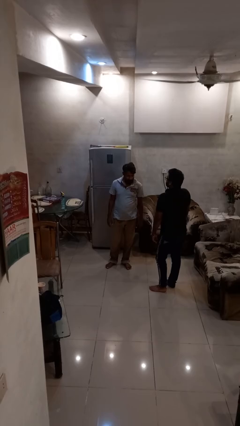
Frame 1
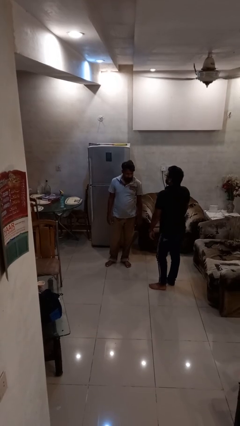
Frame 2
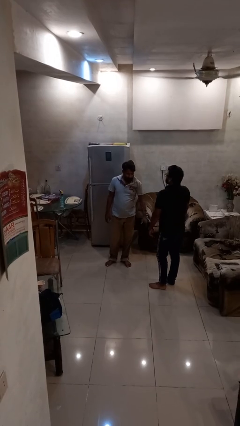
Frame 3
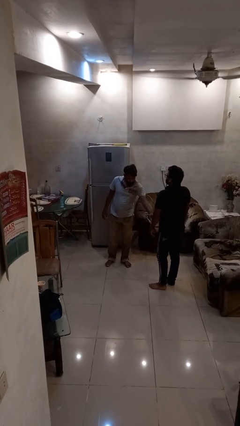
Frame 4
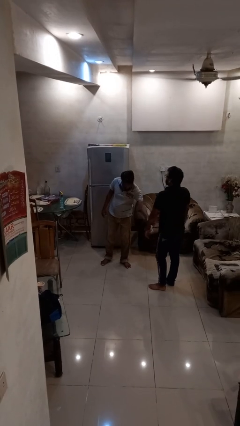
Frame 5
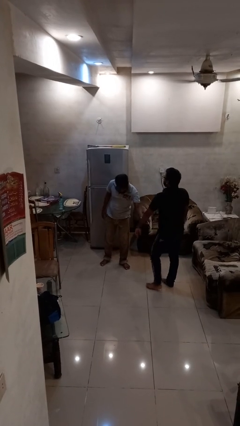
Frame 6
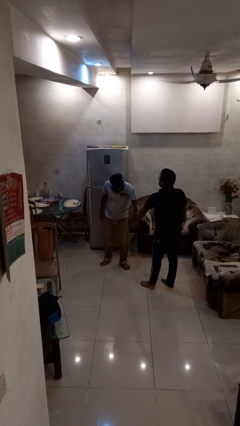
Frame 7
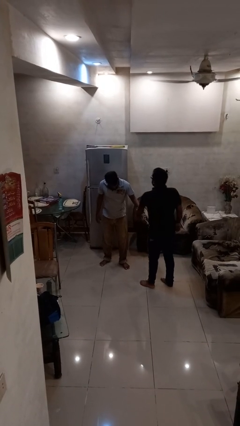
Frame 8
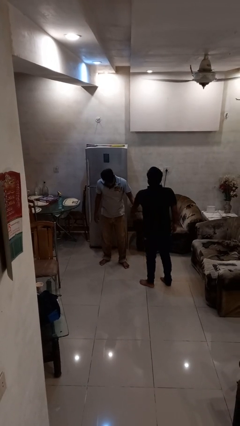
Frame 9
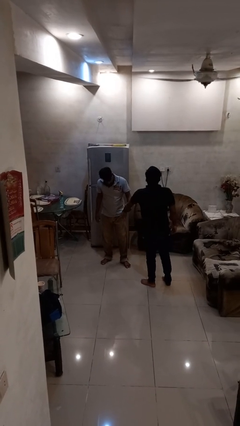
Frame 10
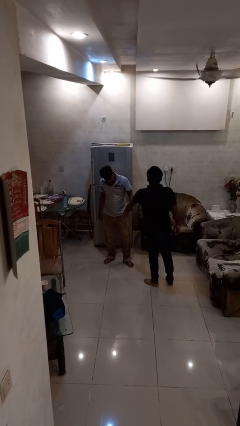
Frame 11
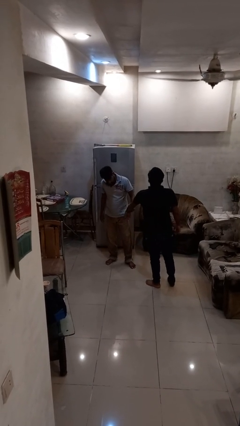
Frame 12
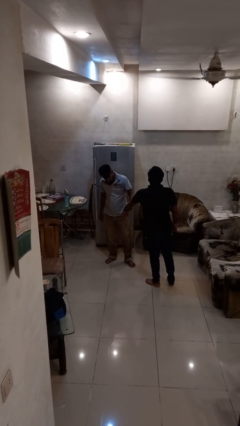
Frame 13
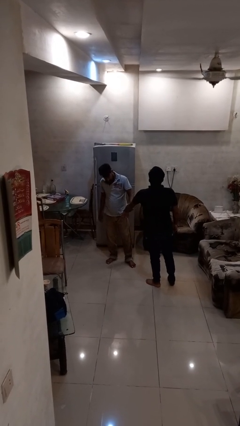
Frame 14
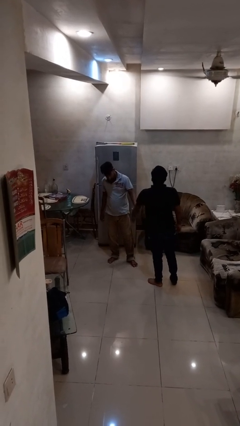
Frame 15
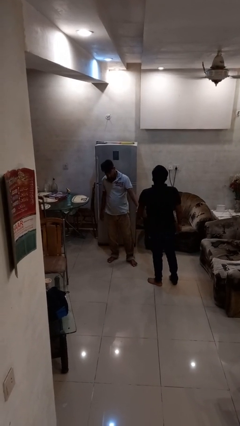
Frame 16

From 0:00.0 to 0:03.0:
person grabs person by forearm

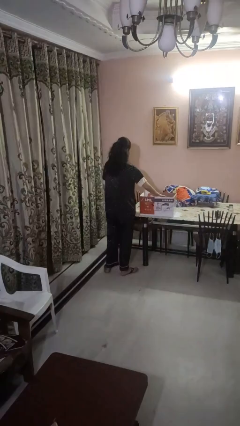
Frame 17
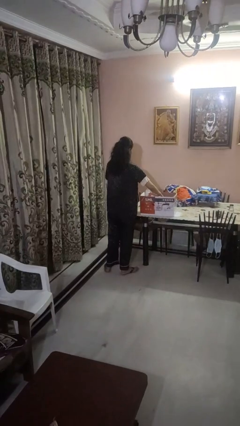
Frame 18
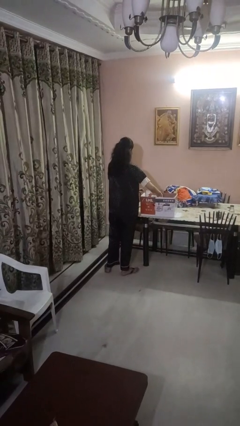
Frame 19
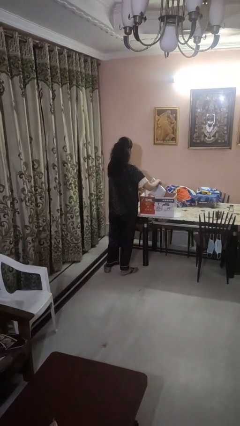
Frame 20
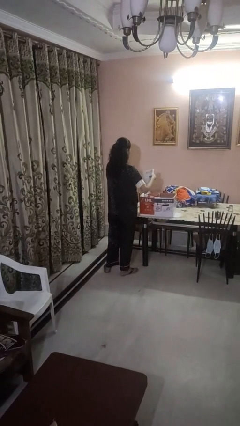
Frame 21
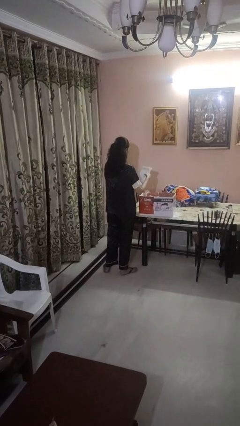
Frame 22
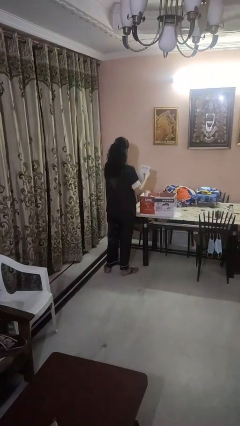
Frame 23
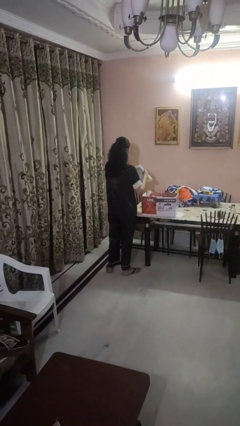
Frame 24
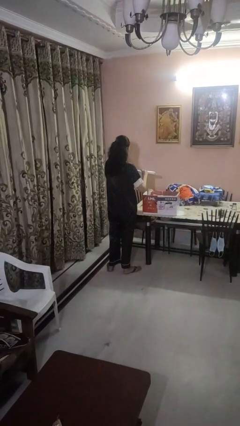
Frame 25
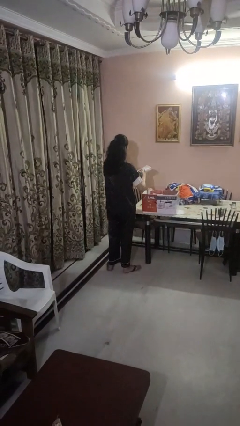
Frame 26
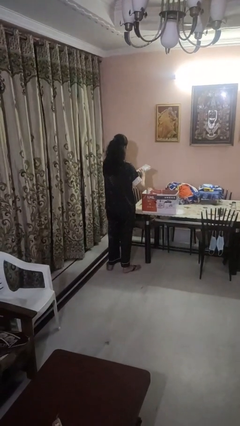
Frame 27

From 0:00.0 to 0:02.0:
person takes object from box

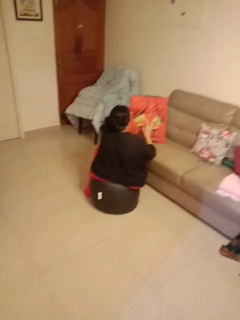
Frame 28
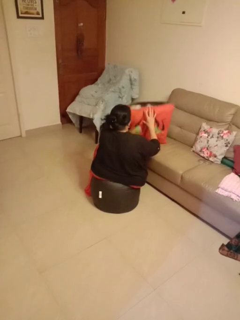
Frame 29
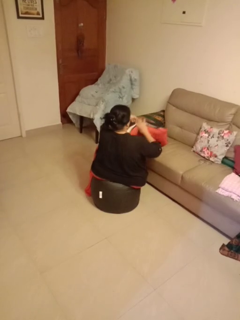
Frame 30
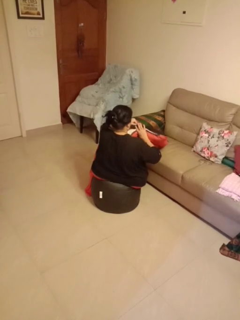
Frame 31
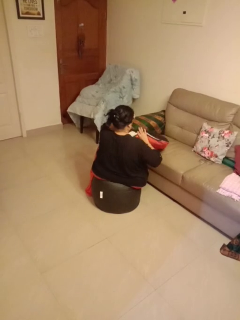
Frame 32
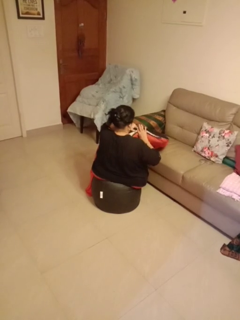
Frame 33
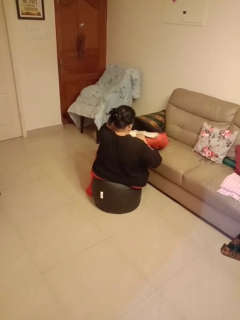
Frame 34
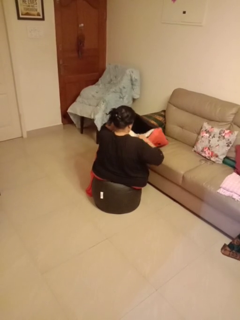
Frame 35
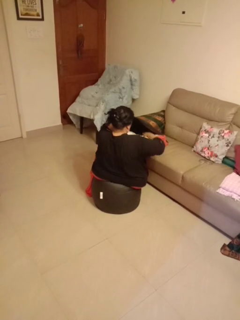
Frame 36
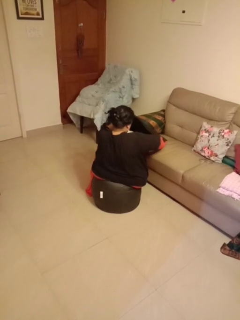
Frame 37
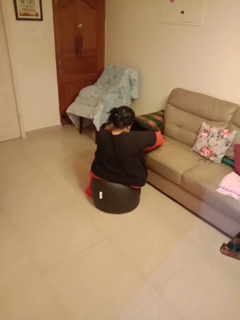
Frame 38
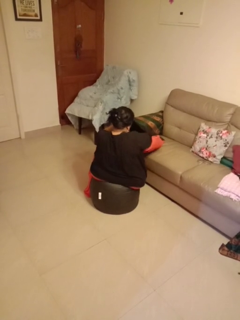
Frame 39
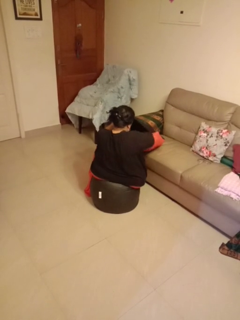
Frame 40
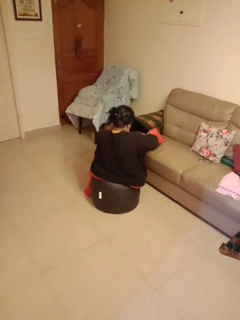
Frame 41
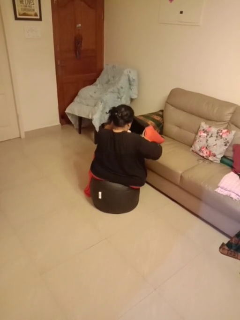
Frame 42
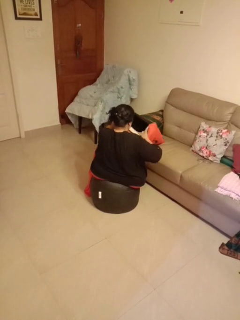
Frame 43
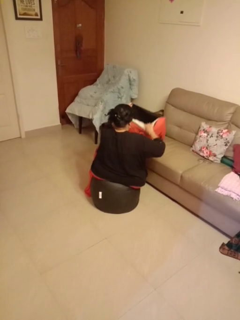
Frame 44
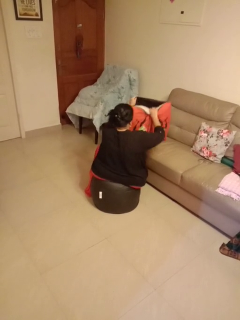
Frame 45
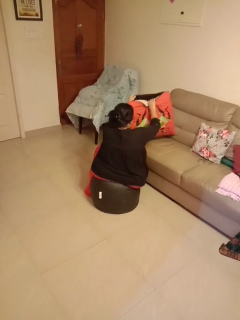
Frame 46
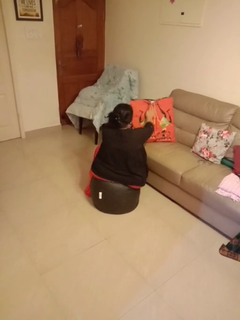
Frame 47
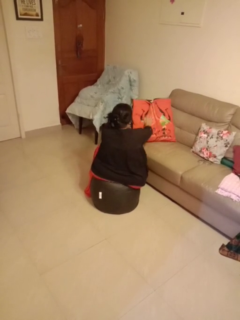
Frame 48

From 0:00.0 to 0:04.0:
person searches in couch

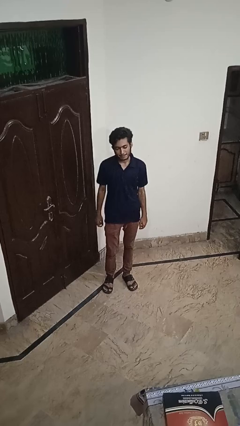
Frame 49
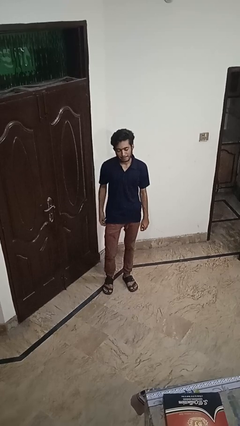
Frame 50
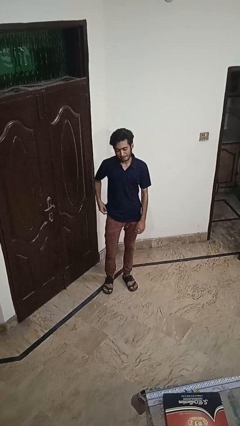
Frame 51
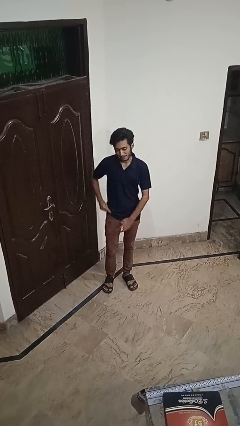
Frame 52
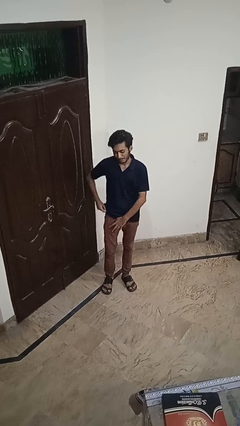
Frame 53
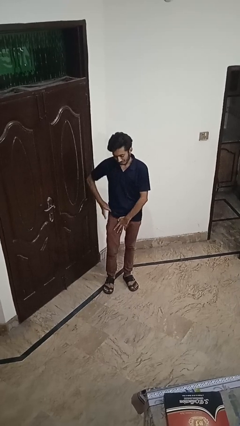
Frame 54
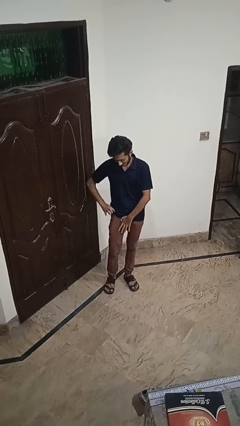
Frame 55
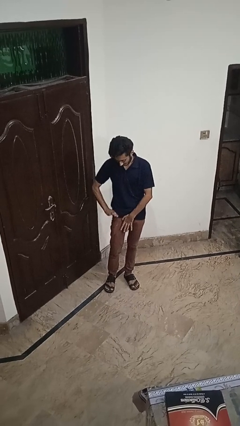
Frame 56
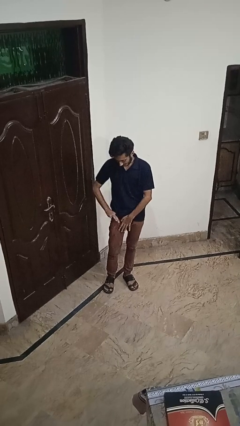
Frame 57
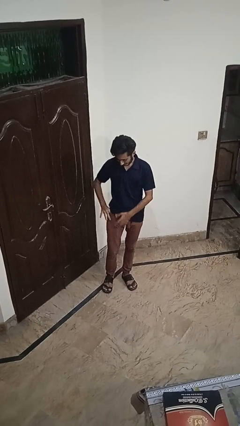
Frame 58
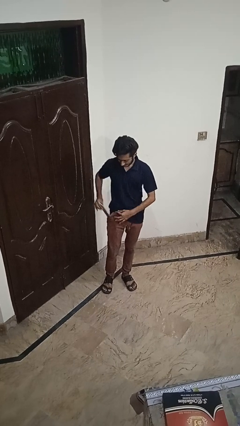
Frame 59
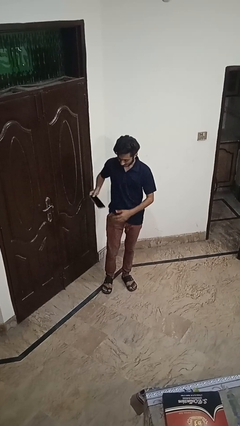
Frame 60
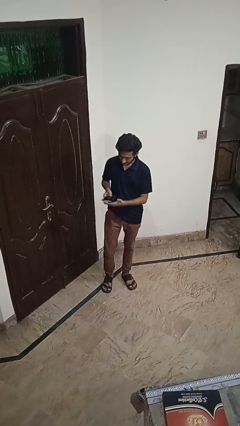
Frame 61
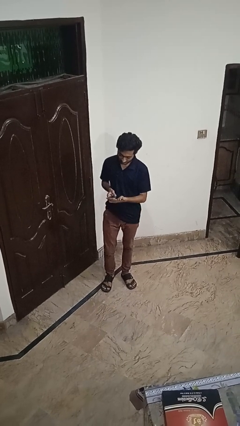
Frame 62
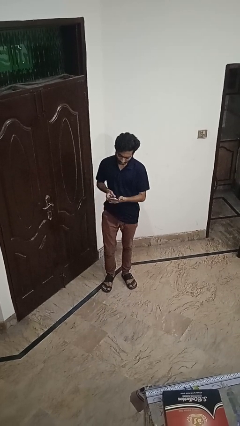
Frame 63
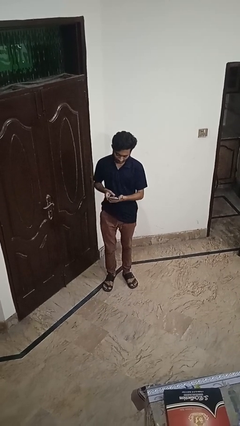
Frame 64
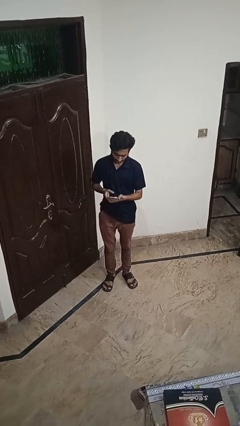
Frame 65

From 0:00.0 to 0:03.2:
person takes phone from pocket

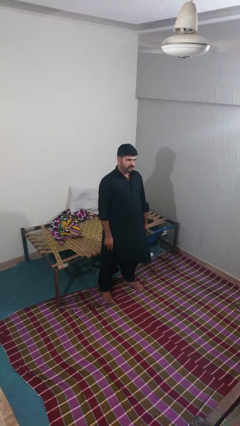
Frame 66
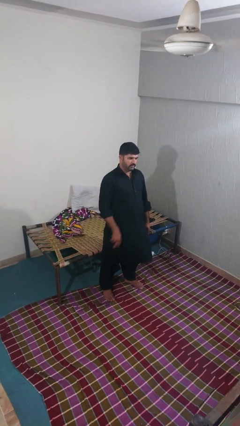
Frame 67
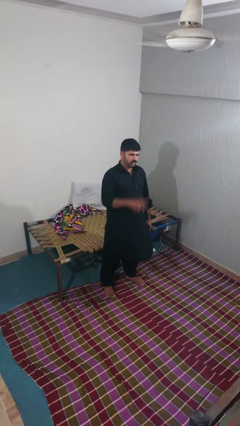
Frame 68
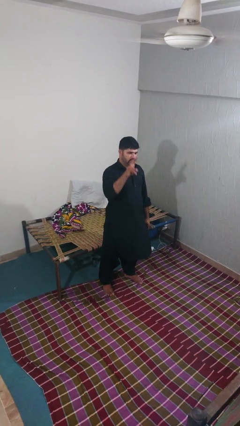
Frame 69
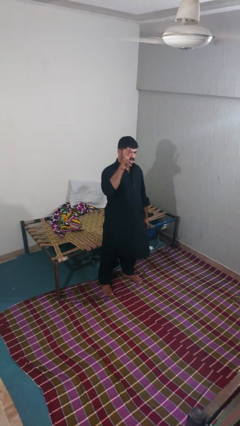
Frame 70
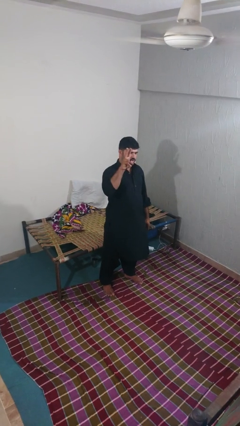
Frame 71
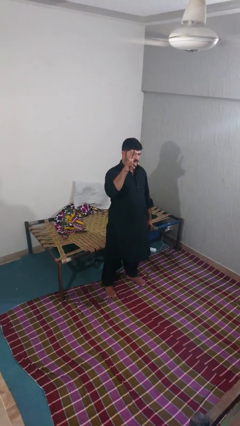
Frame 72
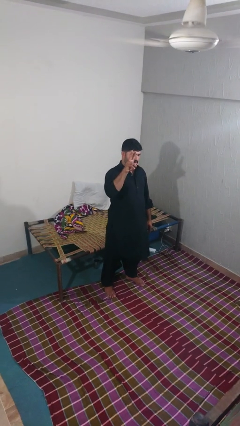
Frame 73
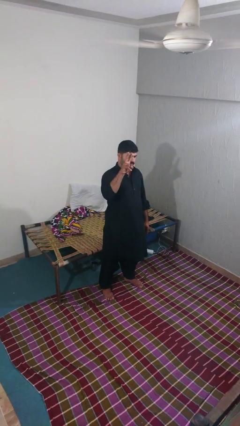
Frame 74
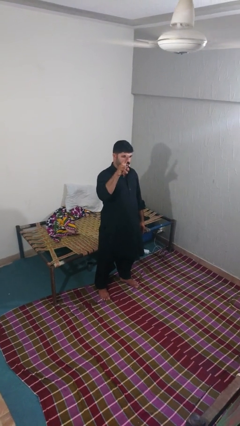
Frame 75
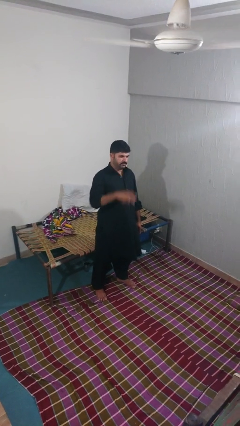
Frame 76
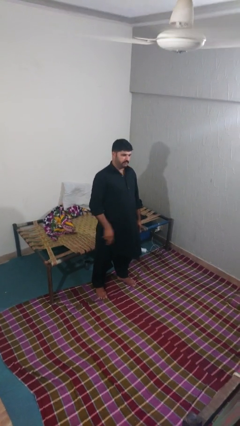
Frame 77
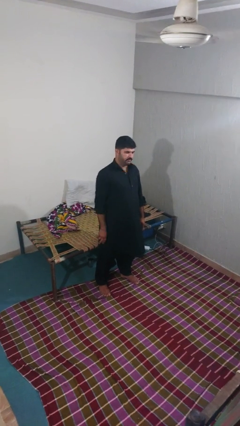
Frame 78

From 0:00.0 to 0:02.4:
person gestures peace

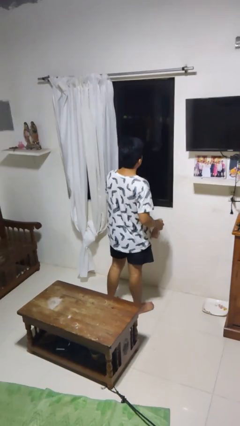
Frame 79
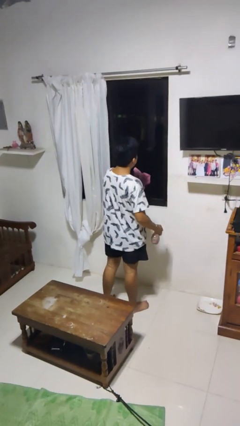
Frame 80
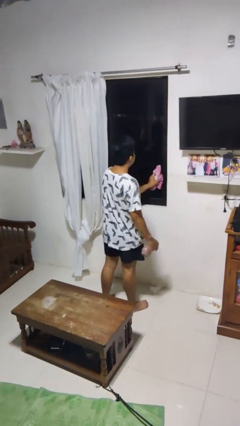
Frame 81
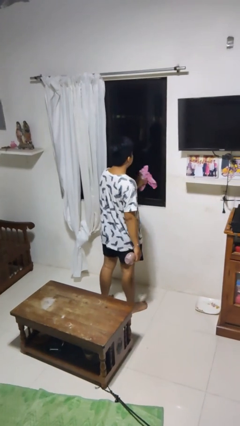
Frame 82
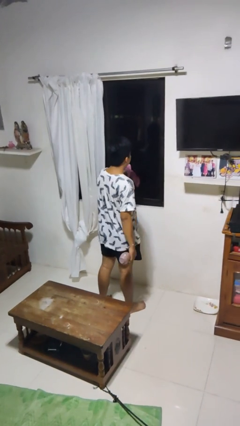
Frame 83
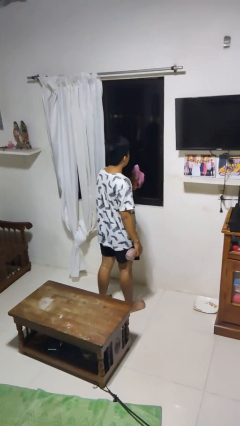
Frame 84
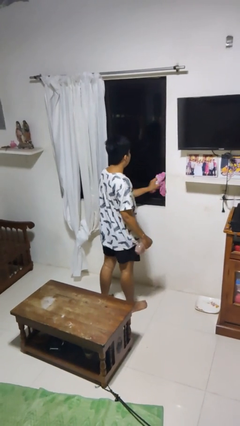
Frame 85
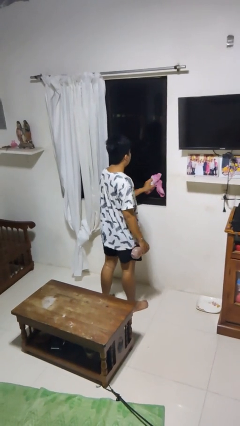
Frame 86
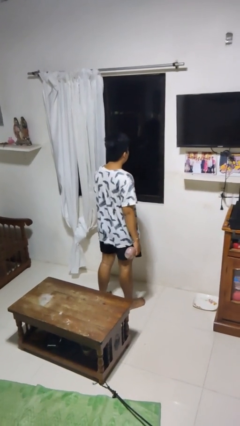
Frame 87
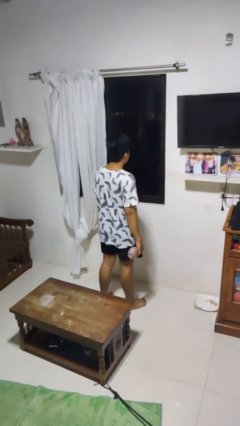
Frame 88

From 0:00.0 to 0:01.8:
person washes window

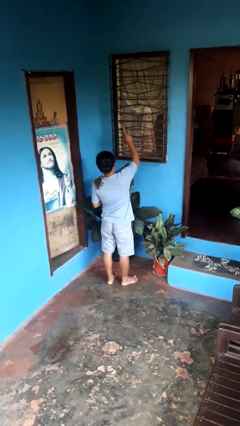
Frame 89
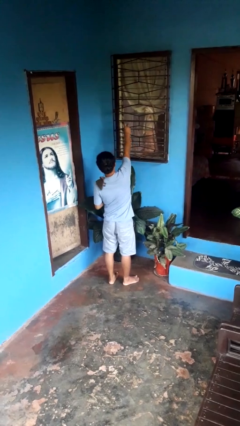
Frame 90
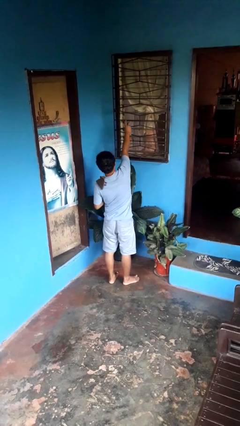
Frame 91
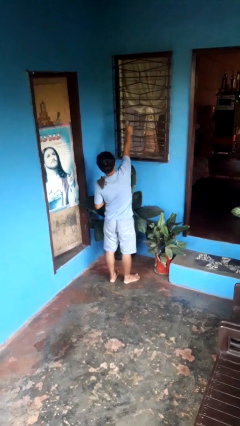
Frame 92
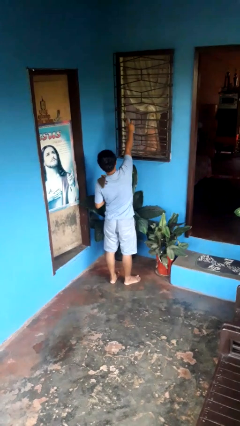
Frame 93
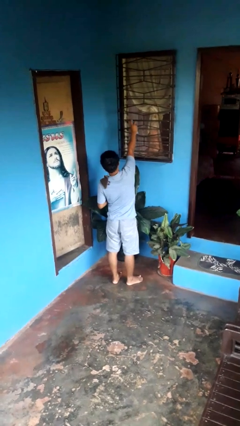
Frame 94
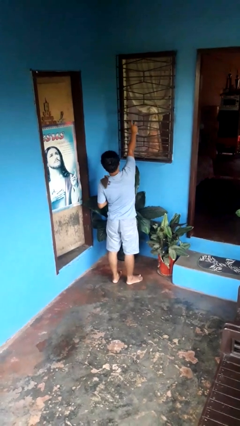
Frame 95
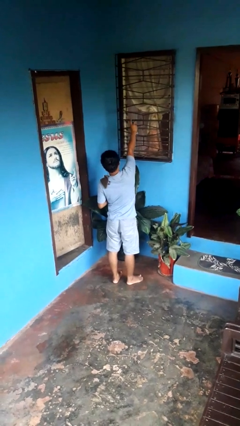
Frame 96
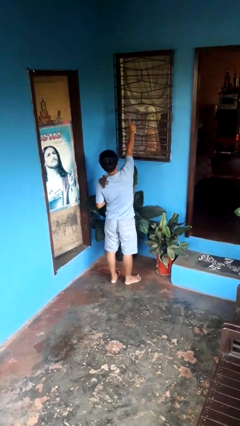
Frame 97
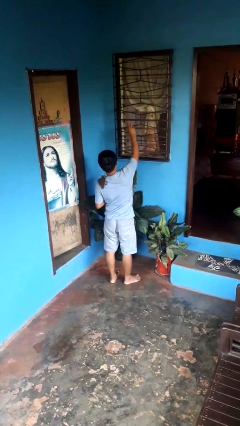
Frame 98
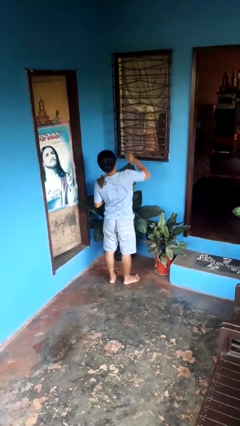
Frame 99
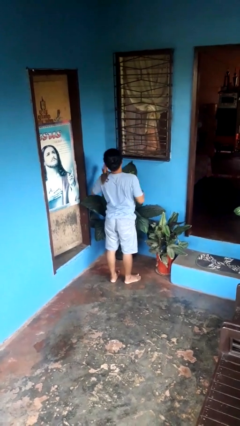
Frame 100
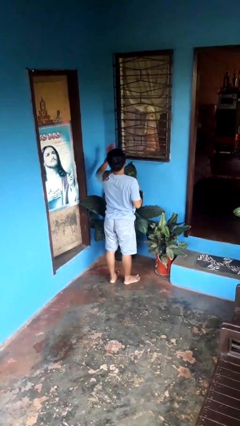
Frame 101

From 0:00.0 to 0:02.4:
person sprays from bottle
